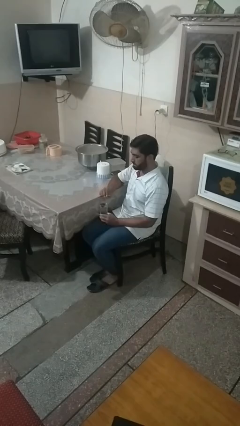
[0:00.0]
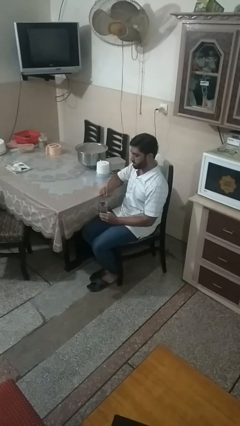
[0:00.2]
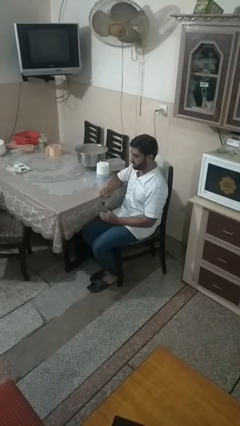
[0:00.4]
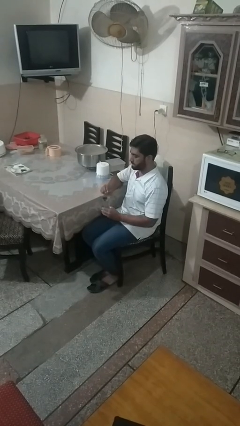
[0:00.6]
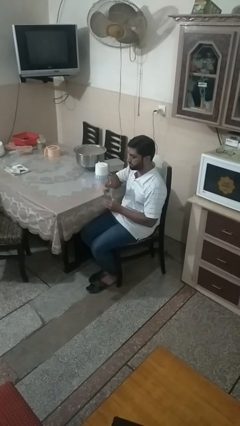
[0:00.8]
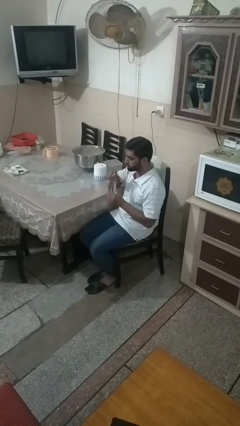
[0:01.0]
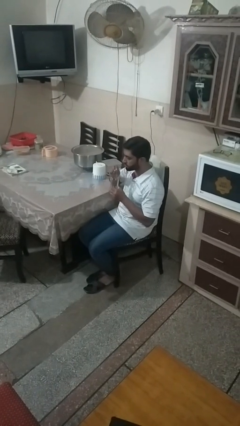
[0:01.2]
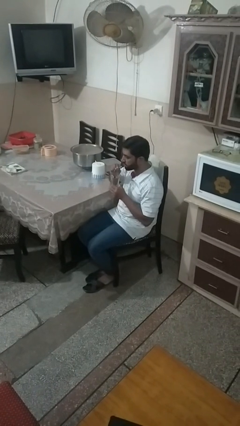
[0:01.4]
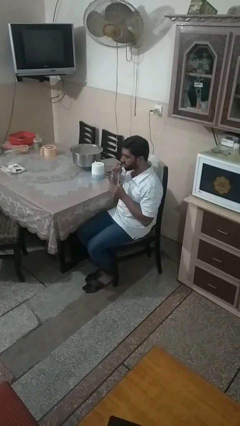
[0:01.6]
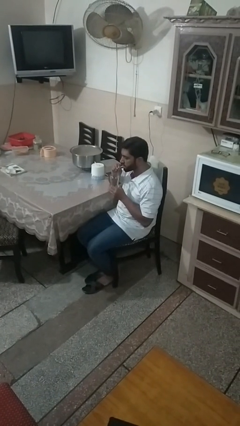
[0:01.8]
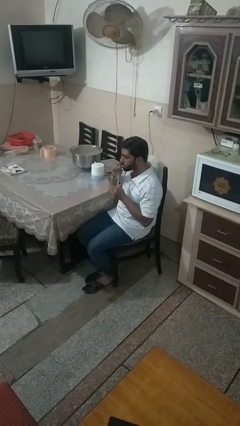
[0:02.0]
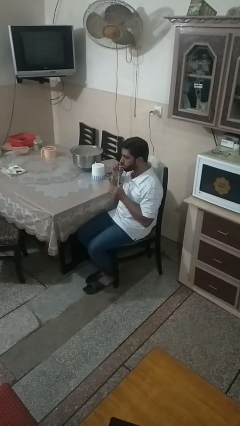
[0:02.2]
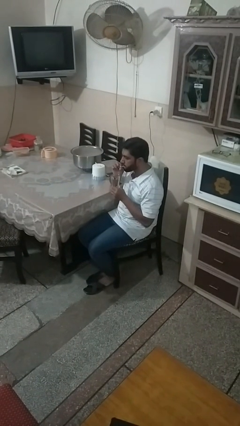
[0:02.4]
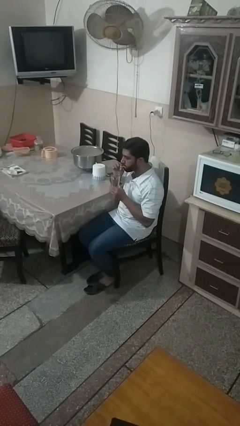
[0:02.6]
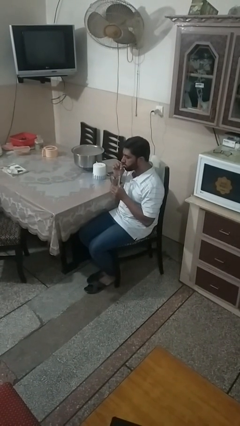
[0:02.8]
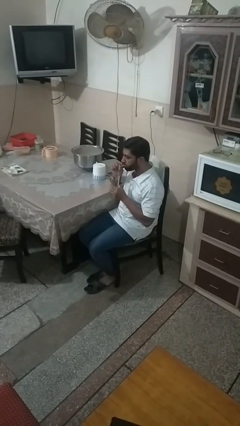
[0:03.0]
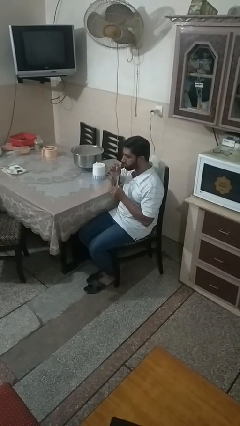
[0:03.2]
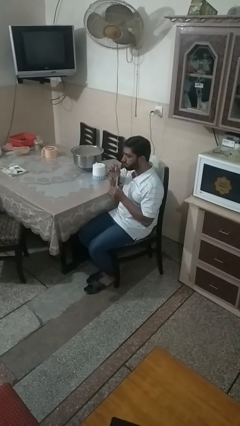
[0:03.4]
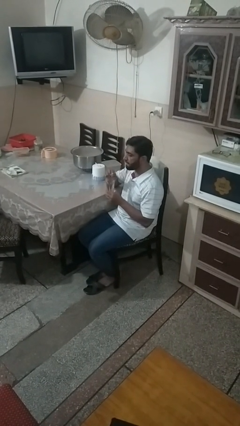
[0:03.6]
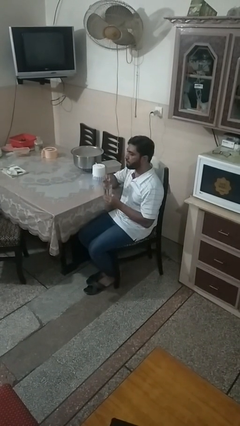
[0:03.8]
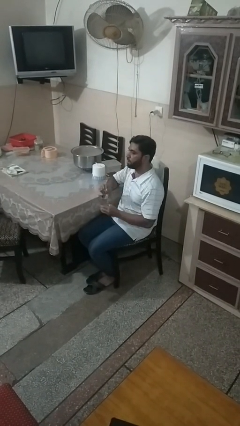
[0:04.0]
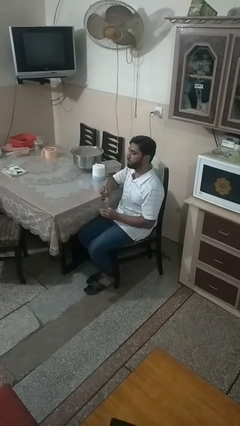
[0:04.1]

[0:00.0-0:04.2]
person drinks from straw

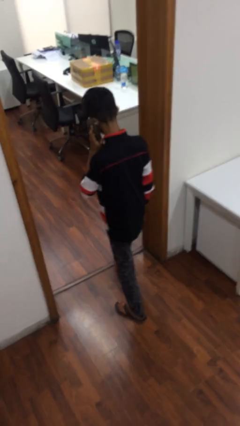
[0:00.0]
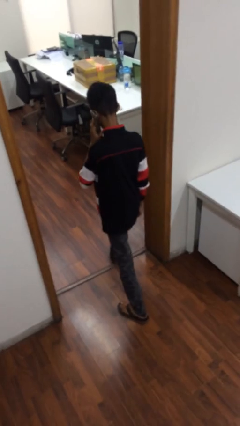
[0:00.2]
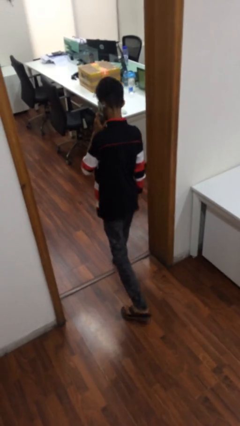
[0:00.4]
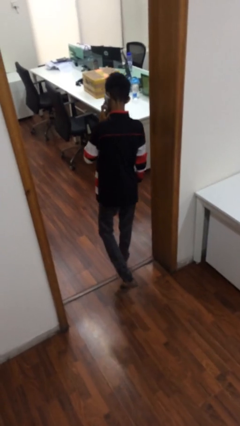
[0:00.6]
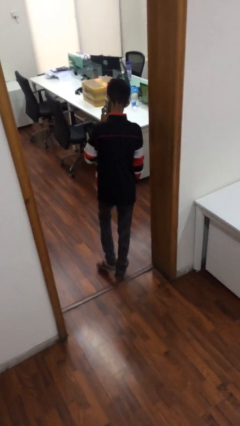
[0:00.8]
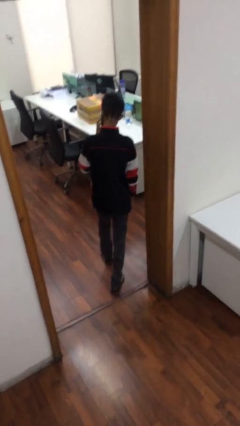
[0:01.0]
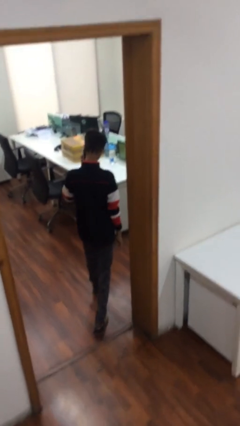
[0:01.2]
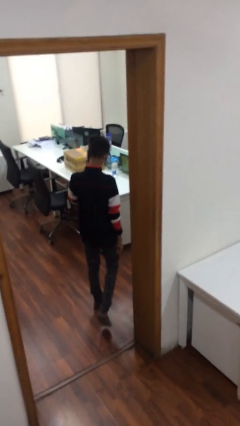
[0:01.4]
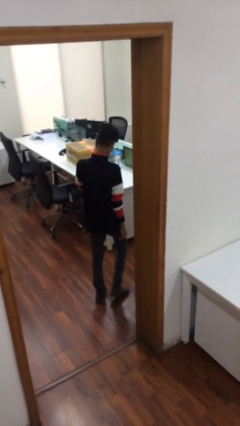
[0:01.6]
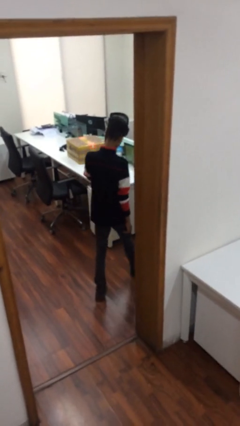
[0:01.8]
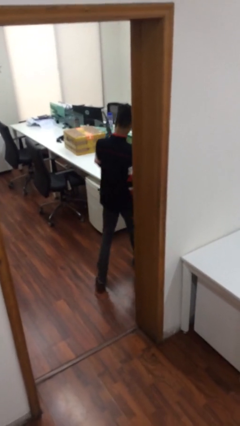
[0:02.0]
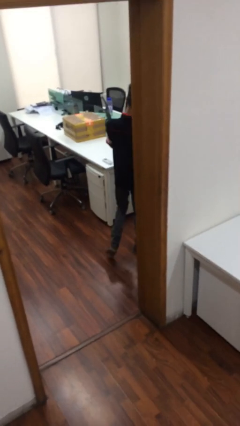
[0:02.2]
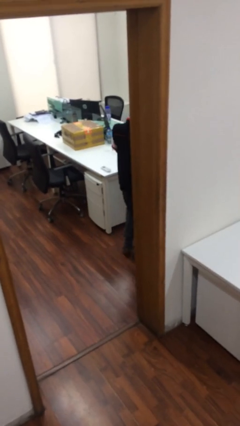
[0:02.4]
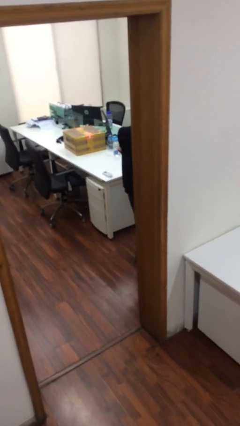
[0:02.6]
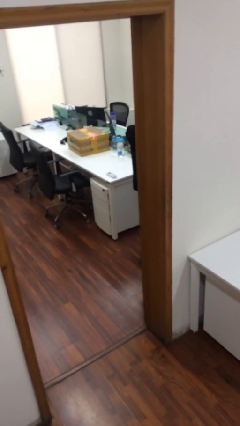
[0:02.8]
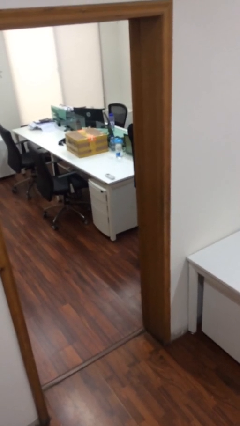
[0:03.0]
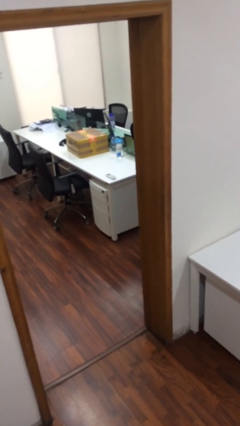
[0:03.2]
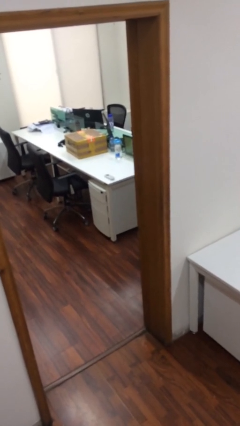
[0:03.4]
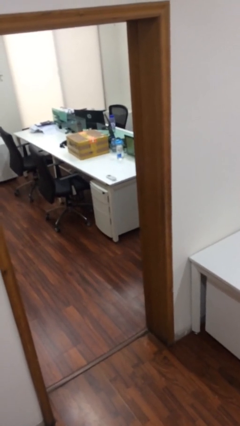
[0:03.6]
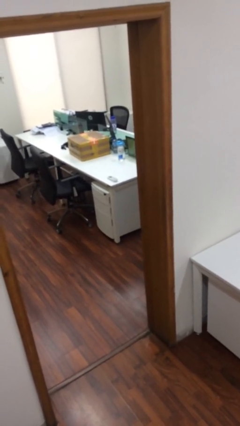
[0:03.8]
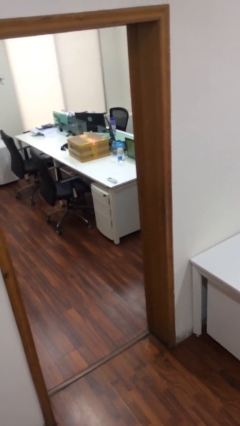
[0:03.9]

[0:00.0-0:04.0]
person exits scene through structure

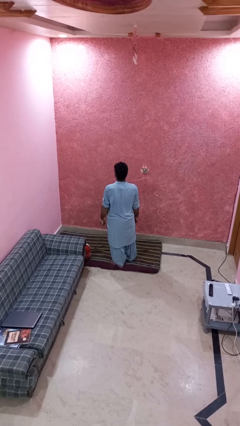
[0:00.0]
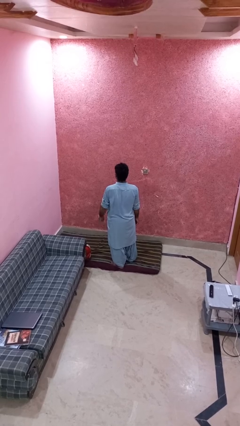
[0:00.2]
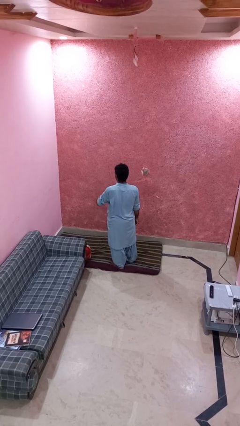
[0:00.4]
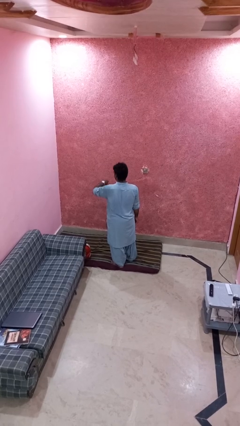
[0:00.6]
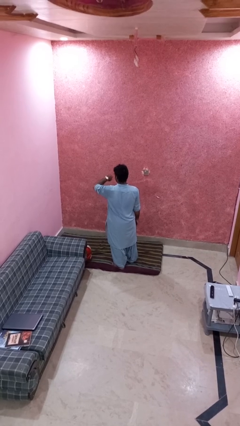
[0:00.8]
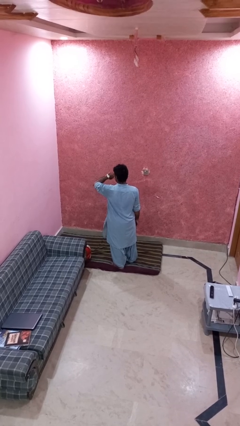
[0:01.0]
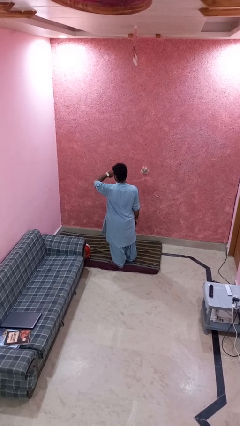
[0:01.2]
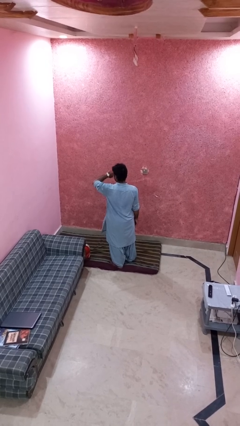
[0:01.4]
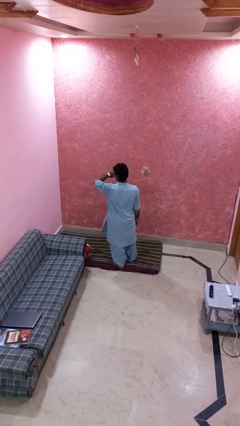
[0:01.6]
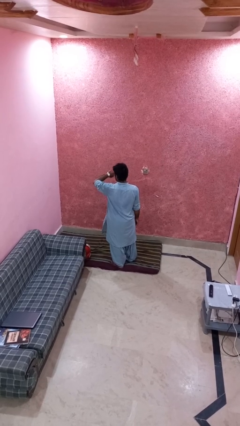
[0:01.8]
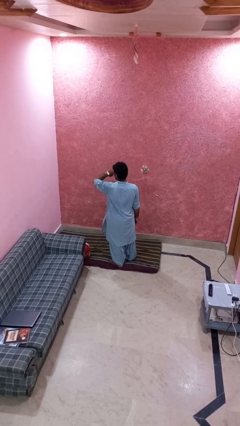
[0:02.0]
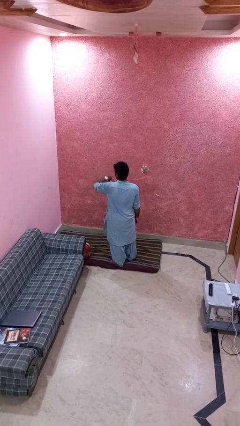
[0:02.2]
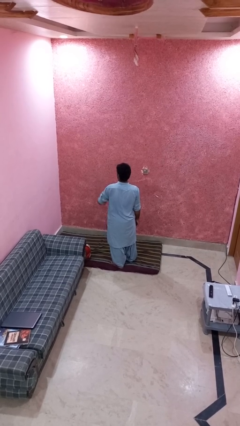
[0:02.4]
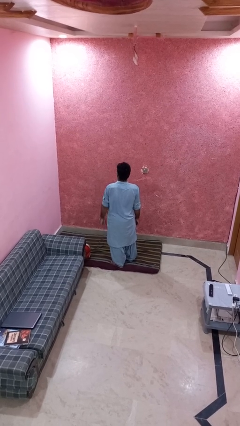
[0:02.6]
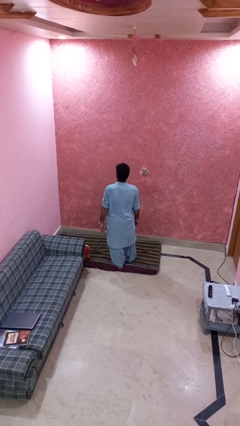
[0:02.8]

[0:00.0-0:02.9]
person looks at wristwatch

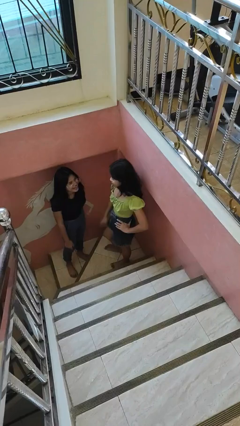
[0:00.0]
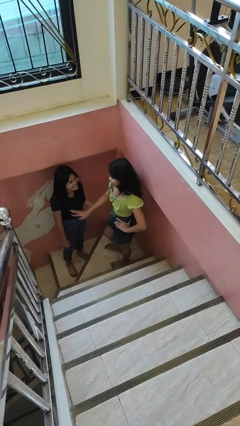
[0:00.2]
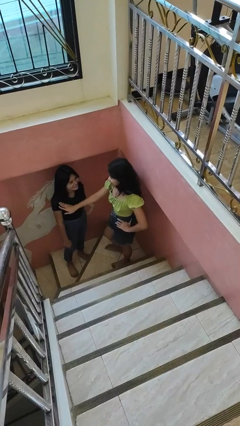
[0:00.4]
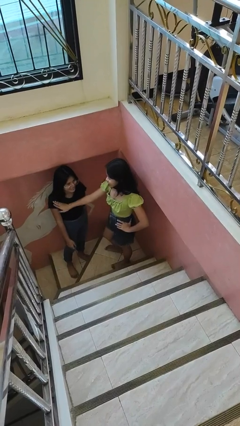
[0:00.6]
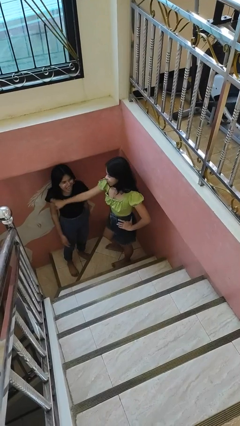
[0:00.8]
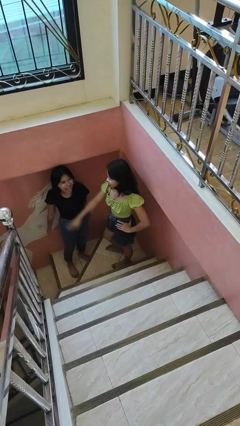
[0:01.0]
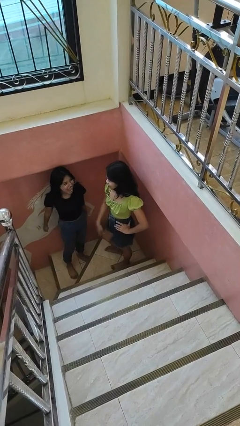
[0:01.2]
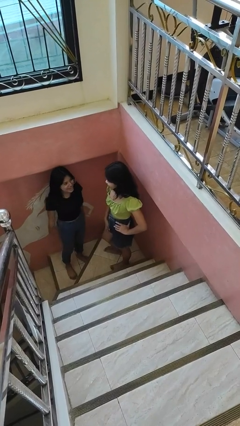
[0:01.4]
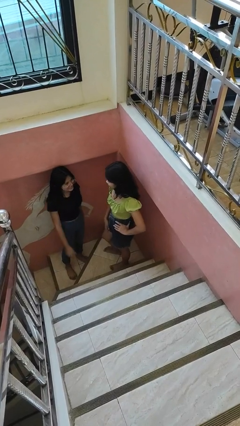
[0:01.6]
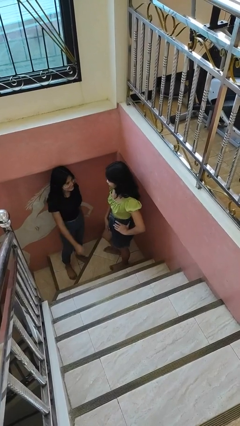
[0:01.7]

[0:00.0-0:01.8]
person shoves person

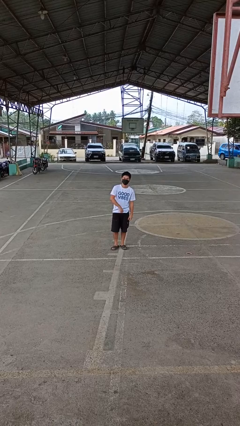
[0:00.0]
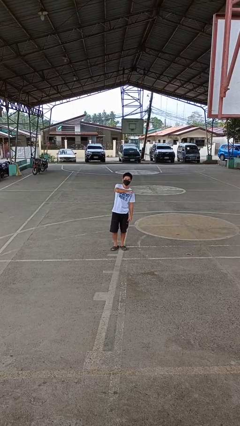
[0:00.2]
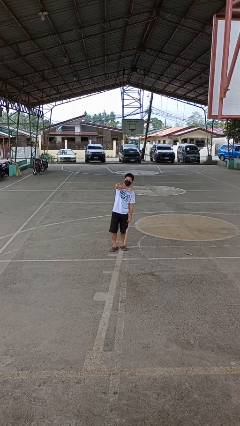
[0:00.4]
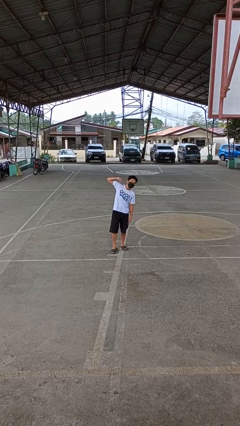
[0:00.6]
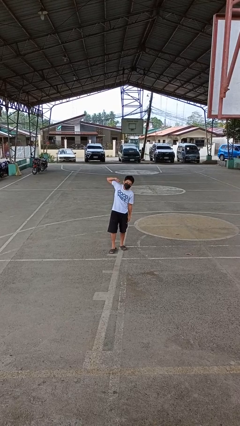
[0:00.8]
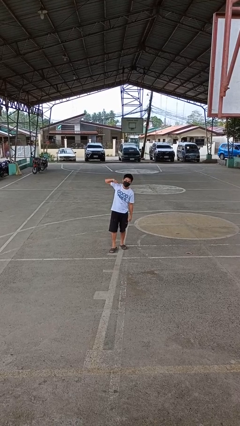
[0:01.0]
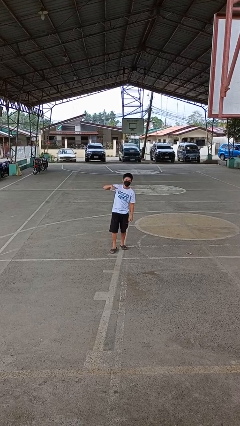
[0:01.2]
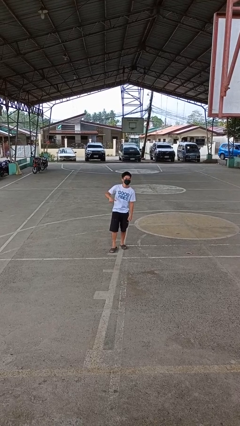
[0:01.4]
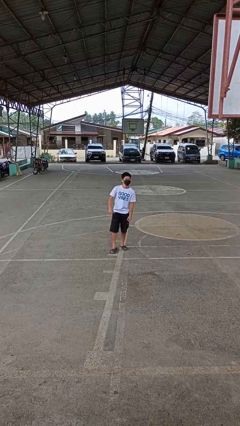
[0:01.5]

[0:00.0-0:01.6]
person gestures cut

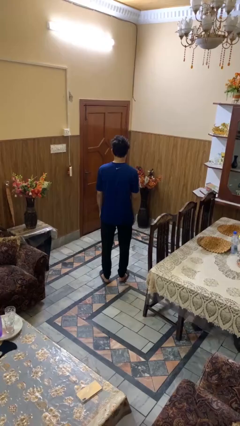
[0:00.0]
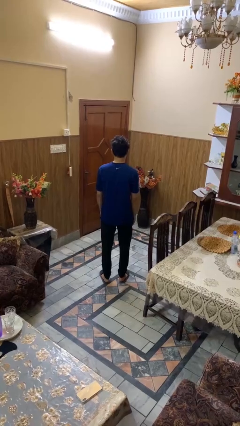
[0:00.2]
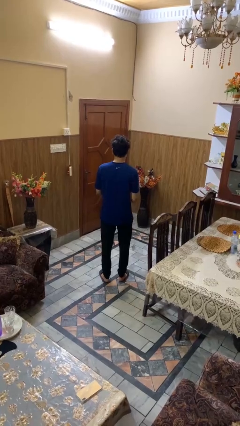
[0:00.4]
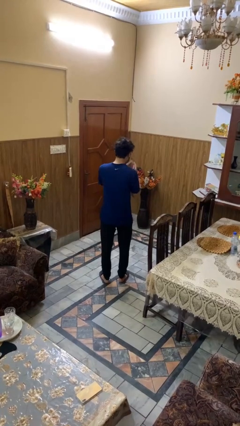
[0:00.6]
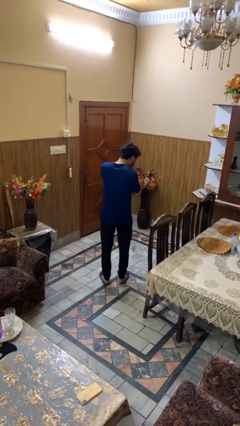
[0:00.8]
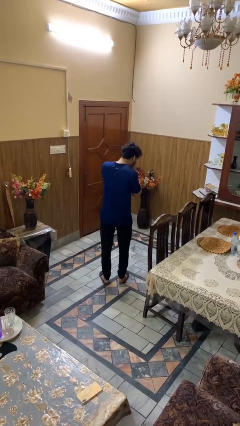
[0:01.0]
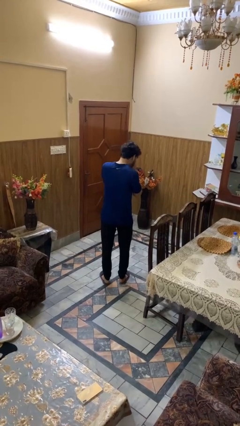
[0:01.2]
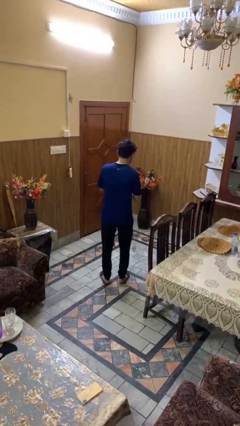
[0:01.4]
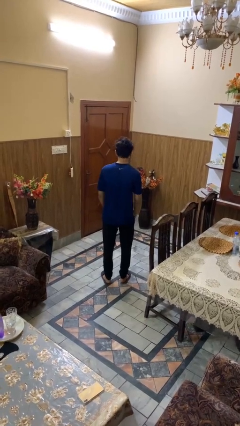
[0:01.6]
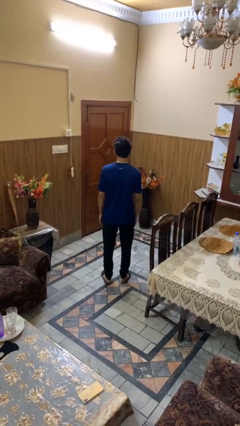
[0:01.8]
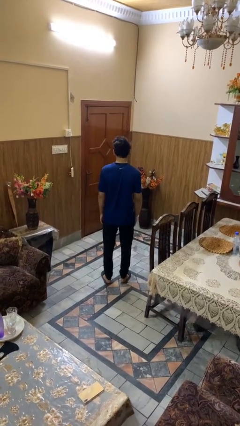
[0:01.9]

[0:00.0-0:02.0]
person sneezes into hand

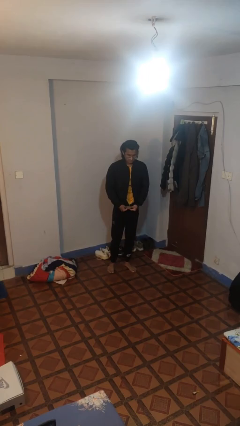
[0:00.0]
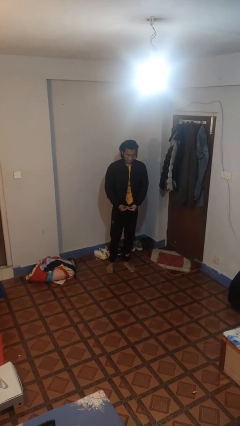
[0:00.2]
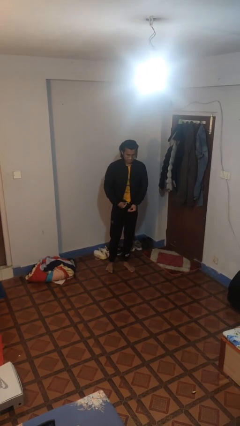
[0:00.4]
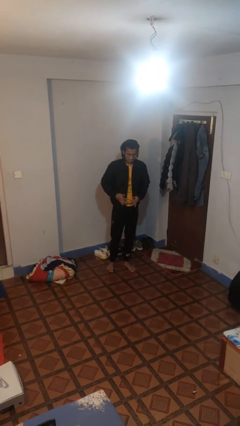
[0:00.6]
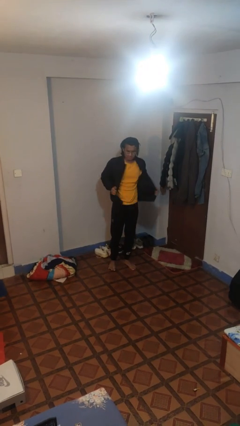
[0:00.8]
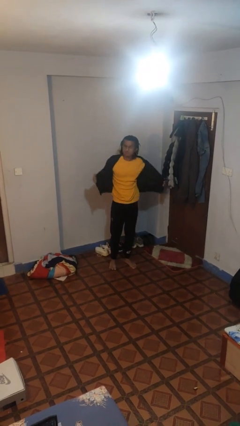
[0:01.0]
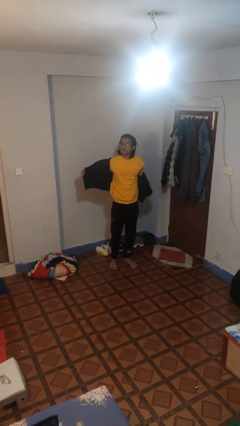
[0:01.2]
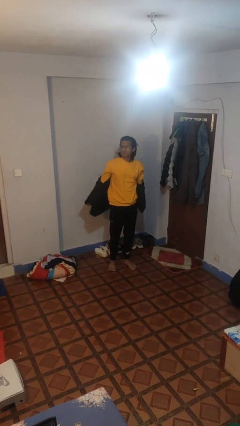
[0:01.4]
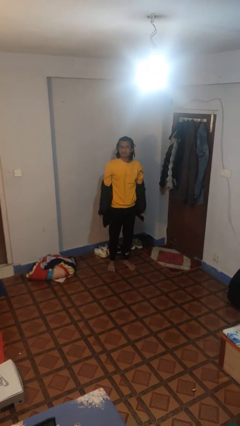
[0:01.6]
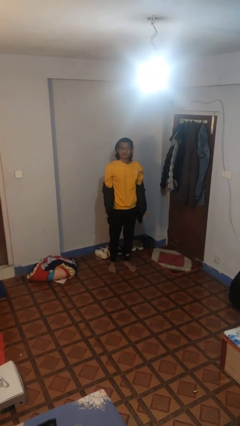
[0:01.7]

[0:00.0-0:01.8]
person takes off jacket
